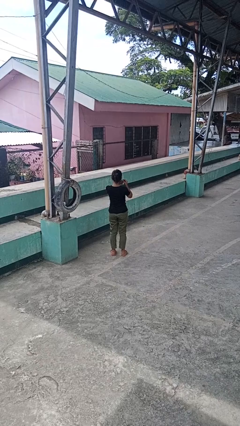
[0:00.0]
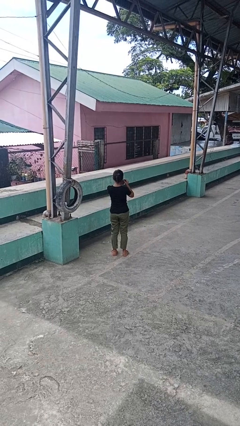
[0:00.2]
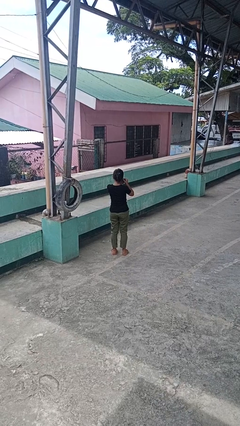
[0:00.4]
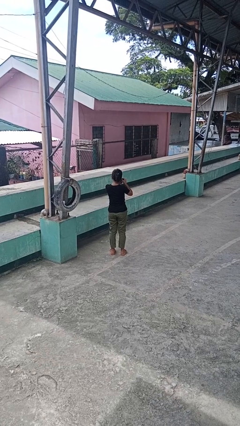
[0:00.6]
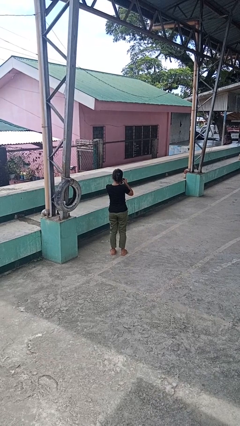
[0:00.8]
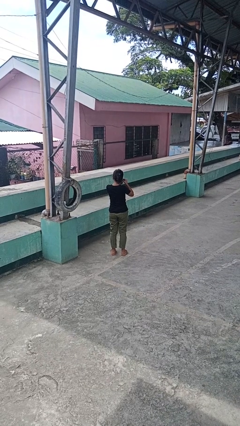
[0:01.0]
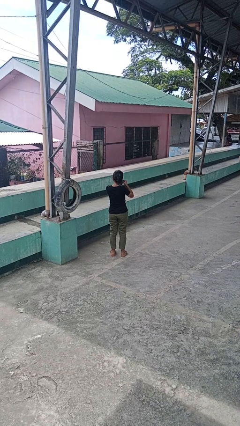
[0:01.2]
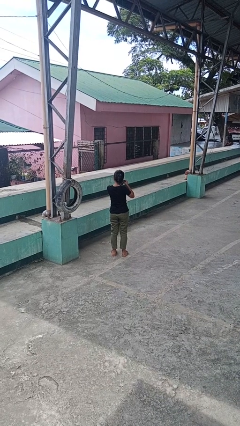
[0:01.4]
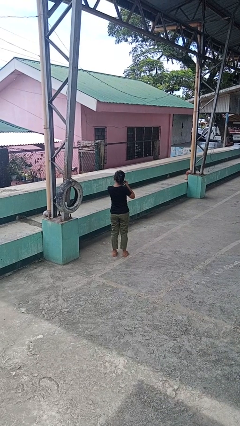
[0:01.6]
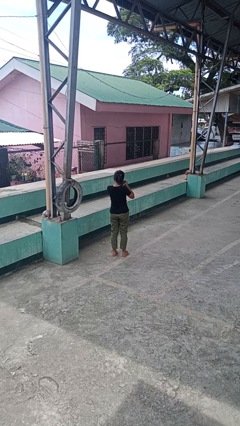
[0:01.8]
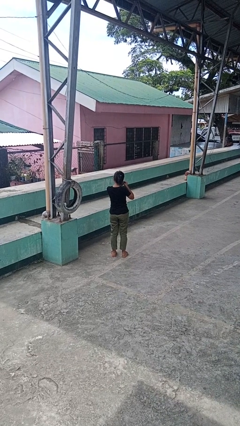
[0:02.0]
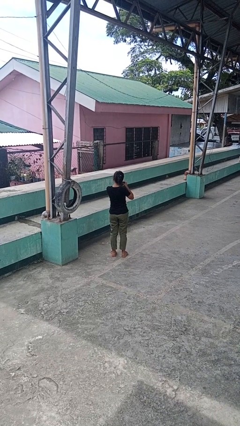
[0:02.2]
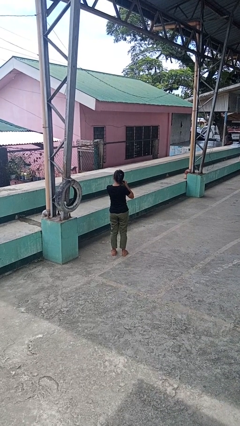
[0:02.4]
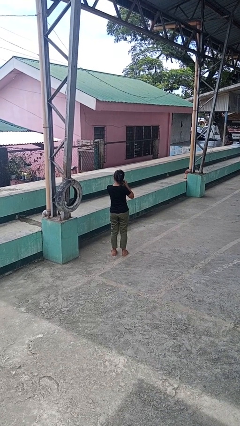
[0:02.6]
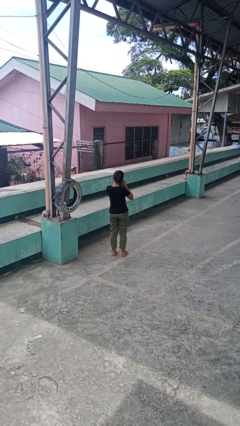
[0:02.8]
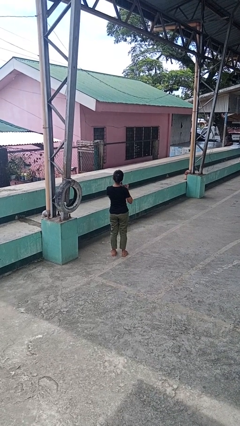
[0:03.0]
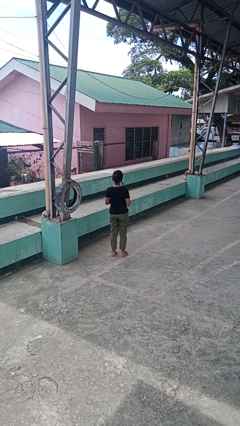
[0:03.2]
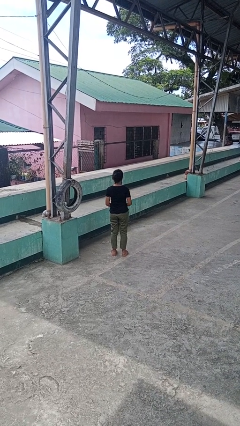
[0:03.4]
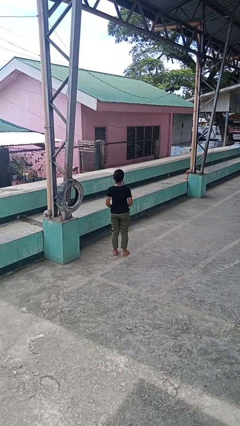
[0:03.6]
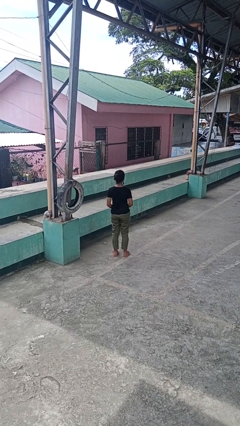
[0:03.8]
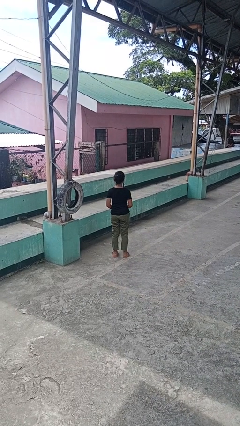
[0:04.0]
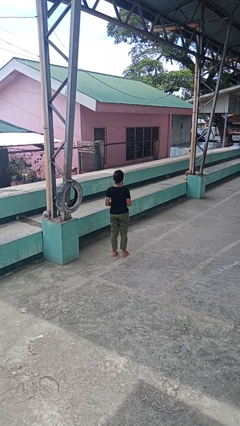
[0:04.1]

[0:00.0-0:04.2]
person puts on earrings

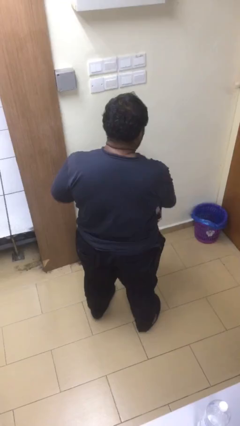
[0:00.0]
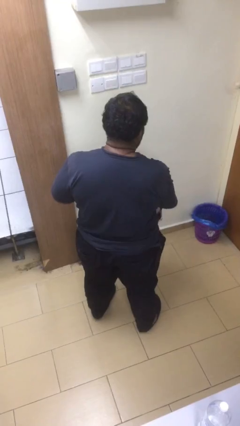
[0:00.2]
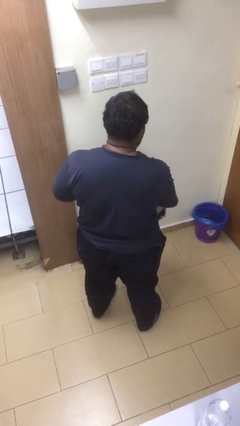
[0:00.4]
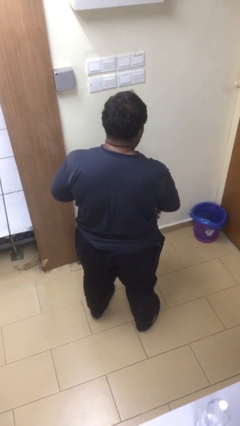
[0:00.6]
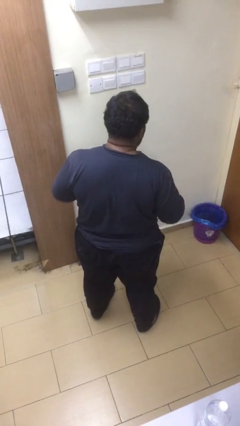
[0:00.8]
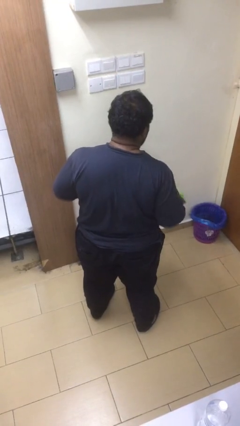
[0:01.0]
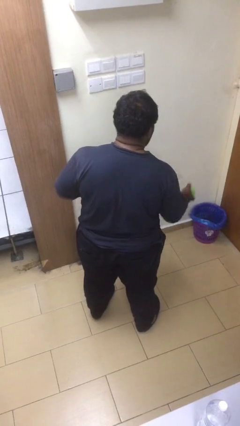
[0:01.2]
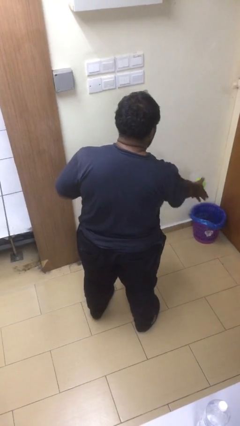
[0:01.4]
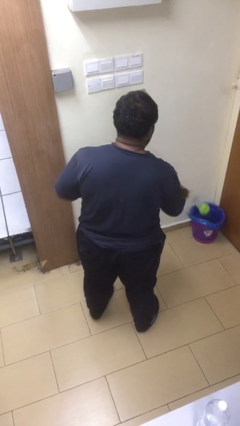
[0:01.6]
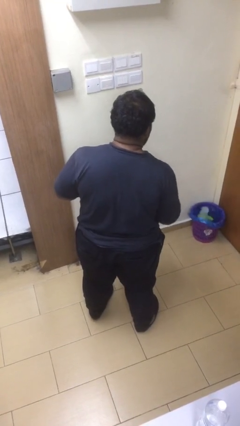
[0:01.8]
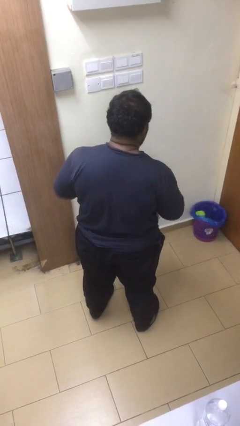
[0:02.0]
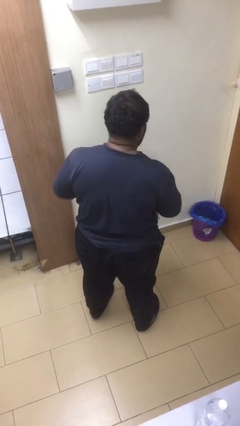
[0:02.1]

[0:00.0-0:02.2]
person discards trash

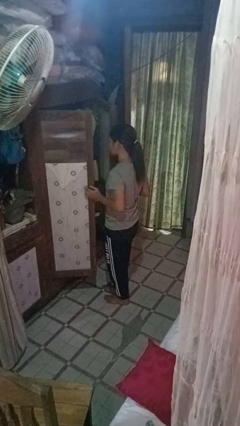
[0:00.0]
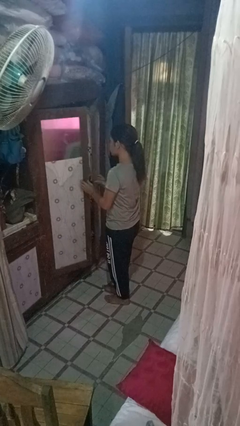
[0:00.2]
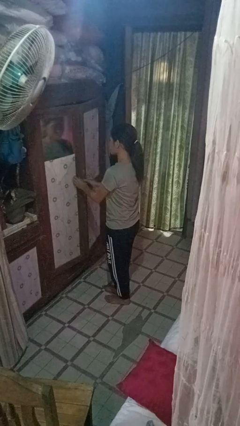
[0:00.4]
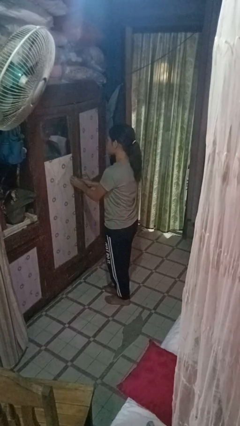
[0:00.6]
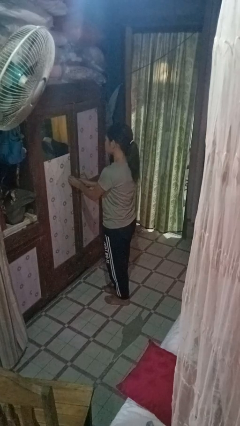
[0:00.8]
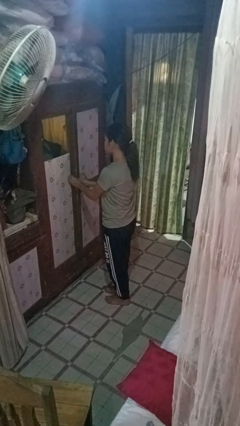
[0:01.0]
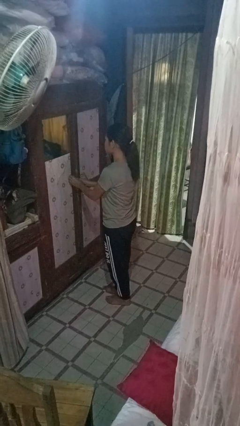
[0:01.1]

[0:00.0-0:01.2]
person closes closet door

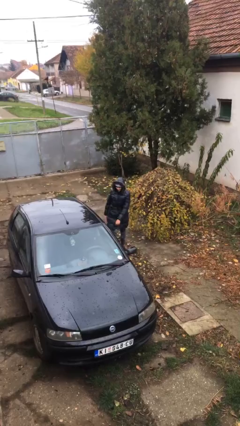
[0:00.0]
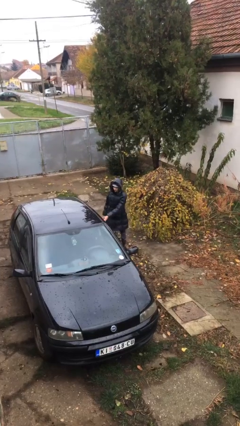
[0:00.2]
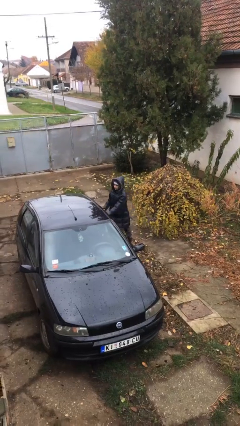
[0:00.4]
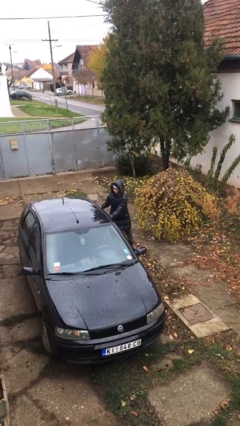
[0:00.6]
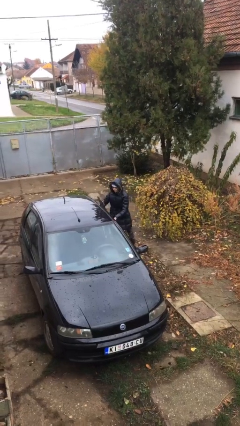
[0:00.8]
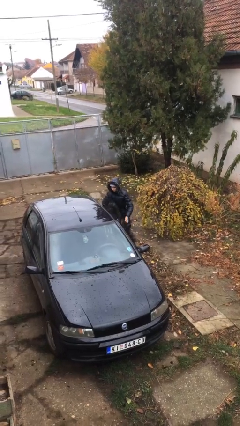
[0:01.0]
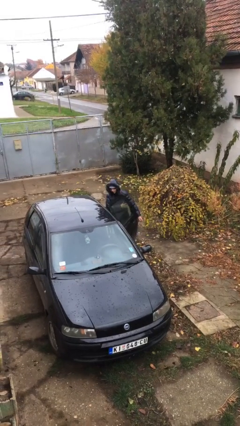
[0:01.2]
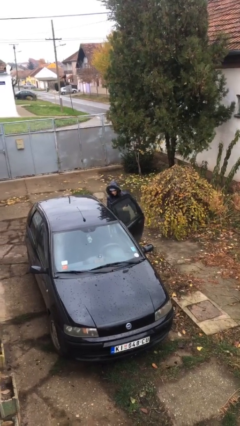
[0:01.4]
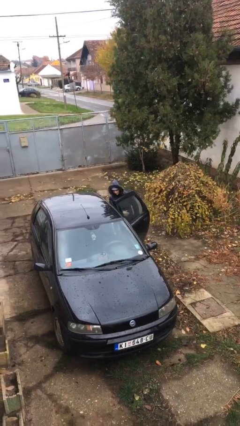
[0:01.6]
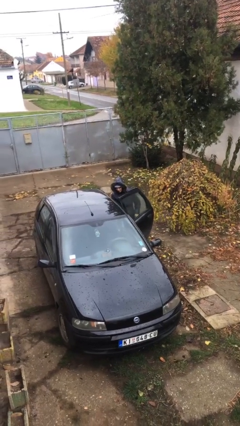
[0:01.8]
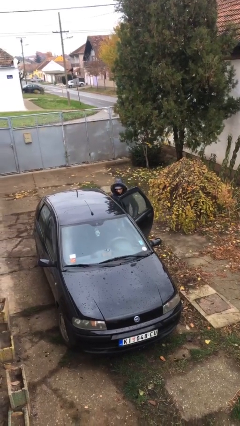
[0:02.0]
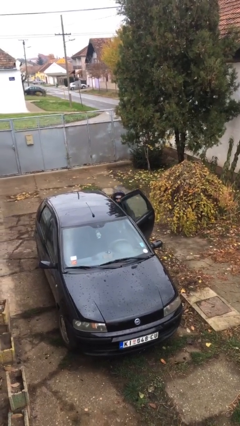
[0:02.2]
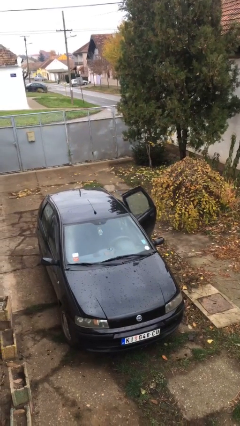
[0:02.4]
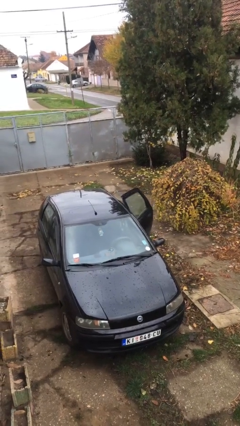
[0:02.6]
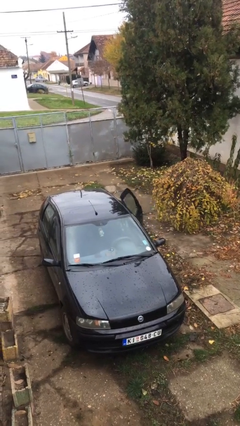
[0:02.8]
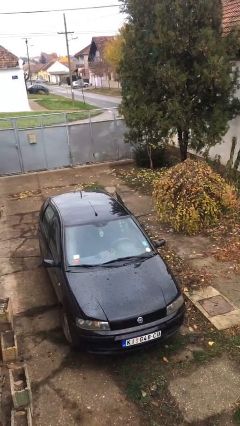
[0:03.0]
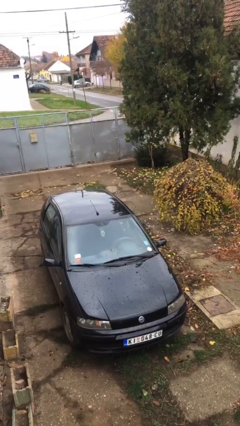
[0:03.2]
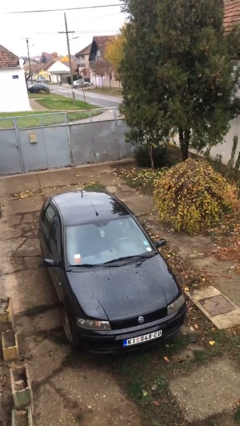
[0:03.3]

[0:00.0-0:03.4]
person enters car

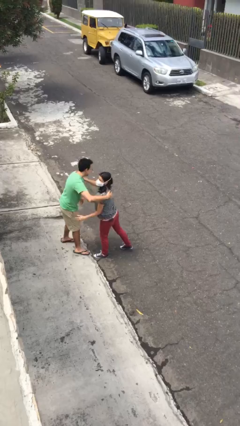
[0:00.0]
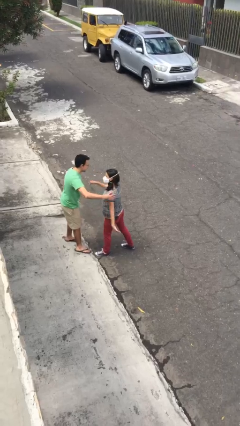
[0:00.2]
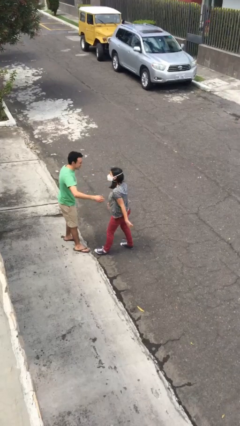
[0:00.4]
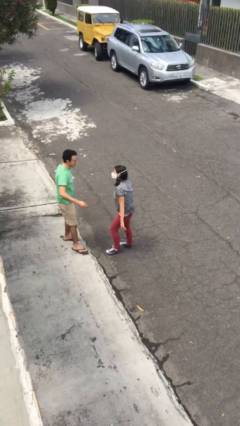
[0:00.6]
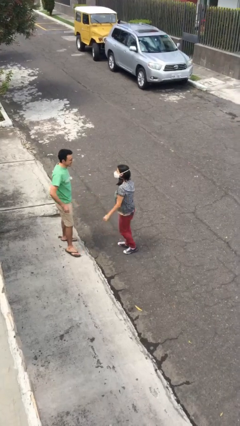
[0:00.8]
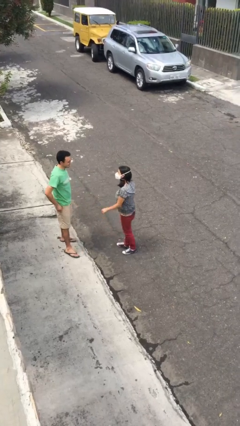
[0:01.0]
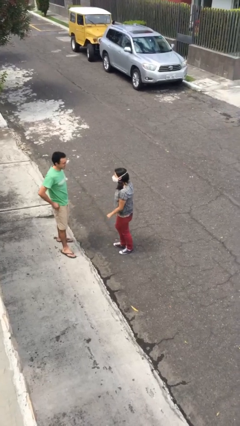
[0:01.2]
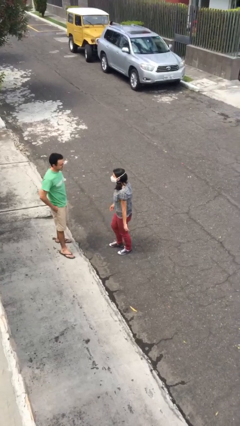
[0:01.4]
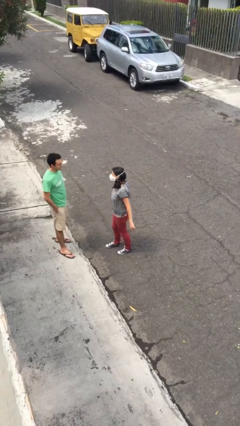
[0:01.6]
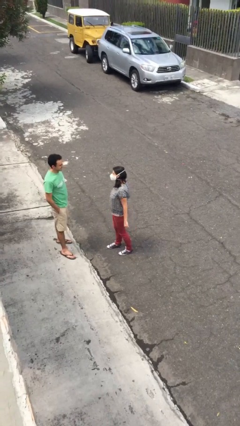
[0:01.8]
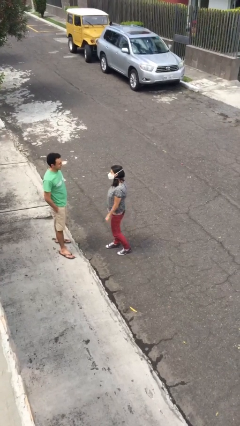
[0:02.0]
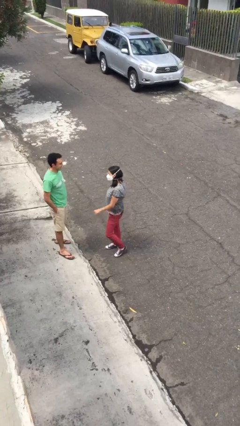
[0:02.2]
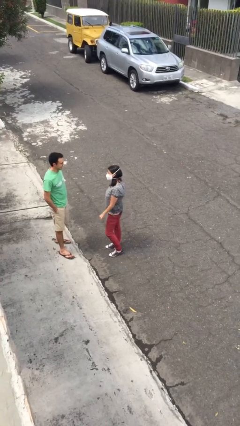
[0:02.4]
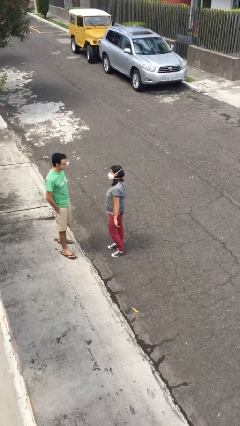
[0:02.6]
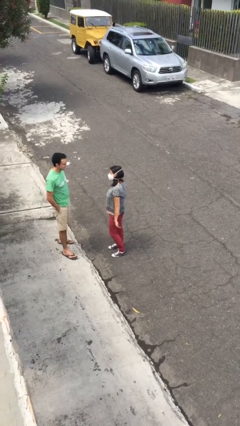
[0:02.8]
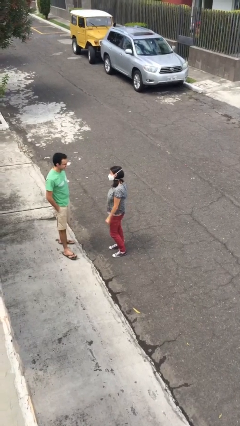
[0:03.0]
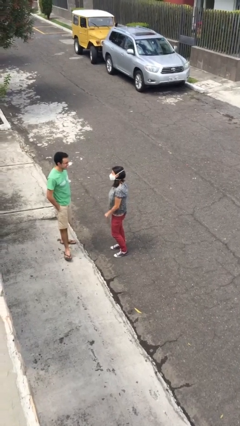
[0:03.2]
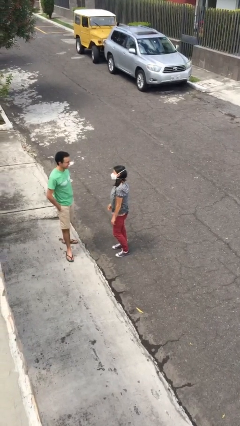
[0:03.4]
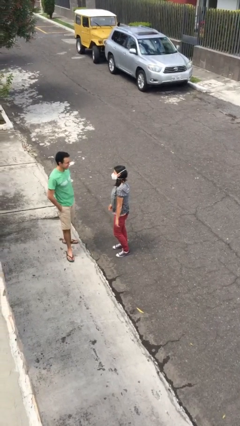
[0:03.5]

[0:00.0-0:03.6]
person talks to person

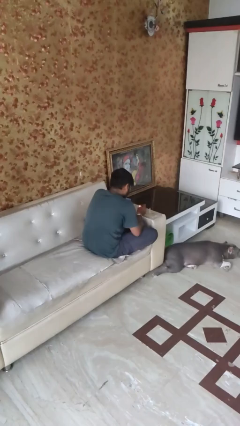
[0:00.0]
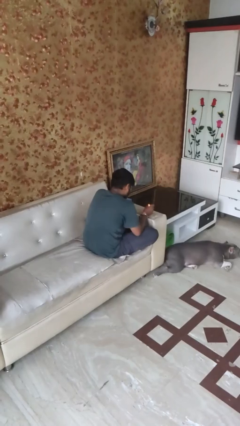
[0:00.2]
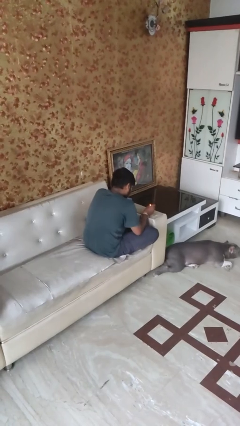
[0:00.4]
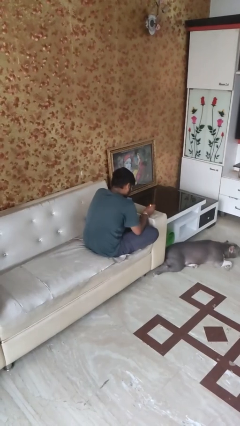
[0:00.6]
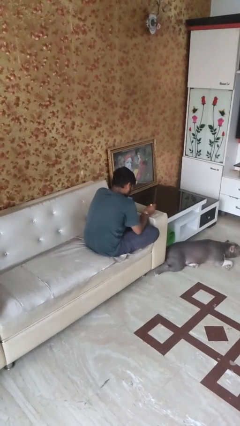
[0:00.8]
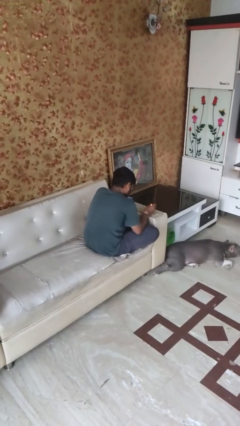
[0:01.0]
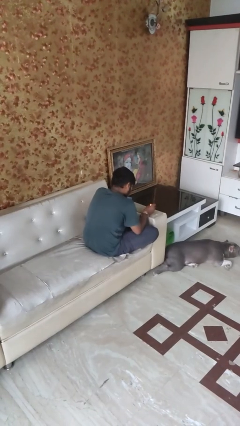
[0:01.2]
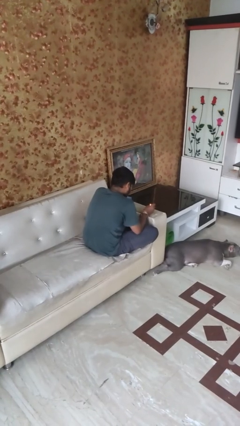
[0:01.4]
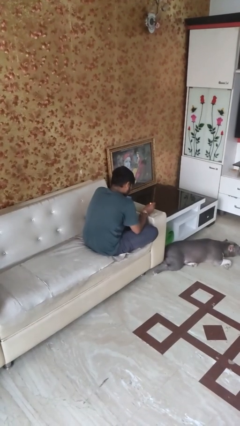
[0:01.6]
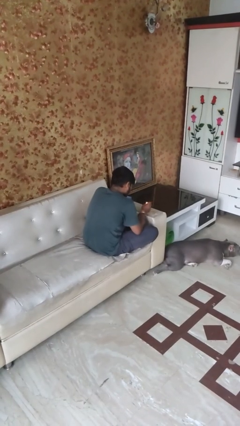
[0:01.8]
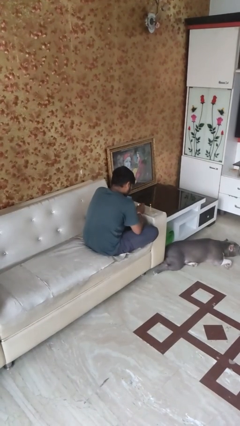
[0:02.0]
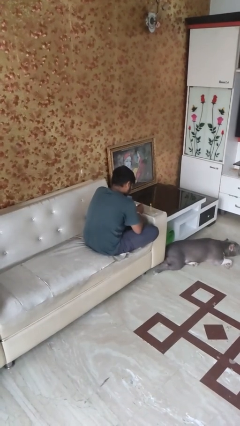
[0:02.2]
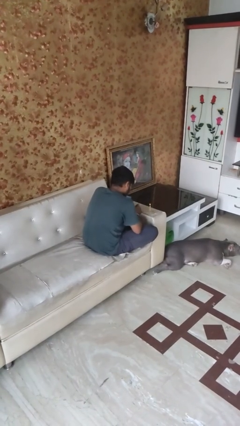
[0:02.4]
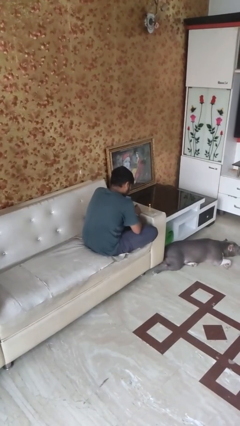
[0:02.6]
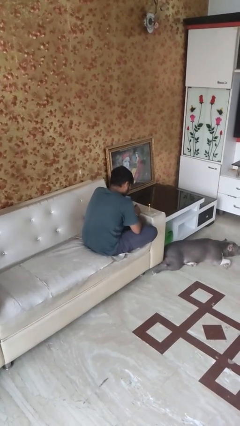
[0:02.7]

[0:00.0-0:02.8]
person lights candle
